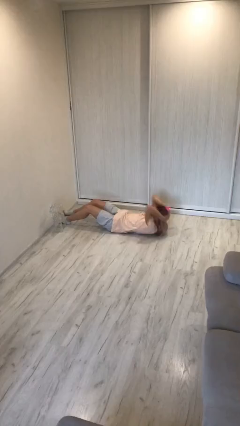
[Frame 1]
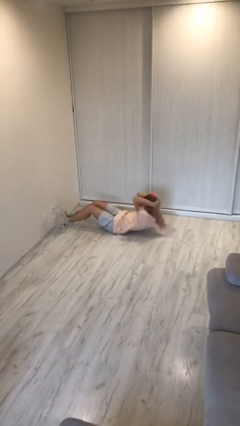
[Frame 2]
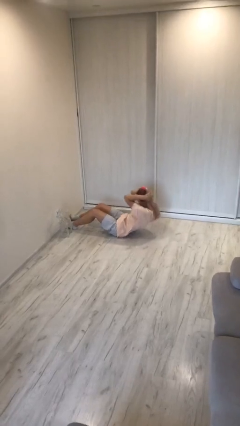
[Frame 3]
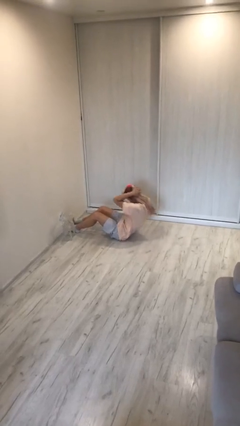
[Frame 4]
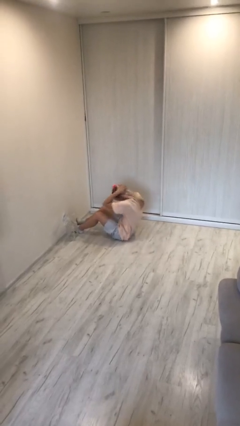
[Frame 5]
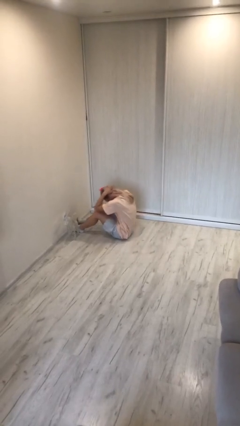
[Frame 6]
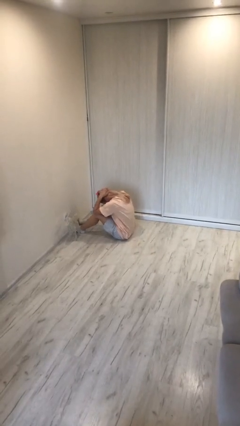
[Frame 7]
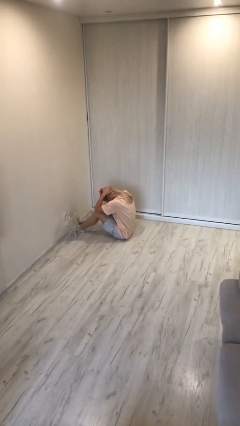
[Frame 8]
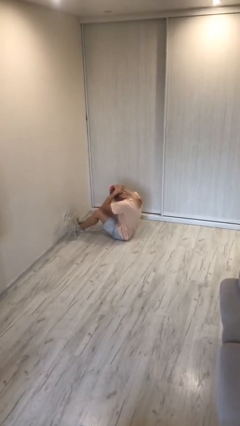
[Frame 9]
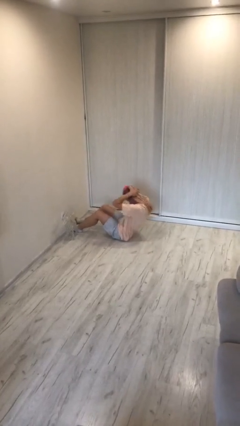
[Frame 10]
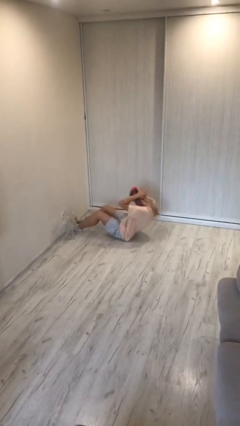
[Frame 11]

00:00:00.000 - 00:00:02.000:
person exercises with situp

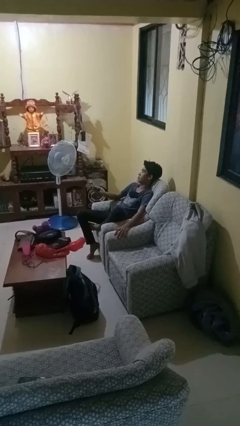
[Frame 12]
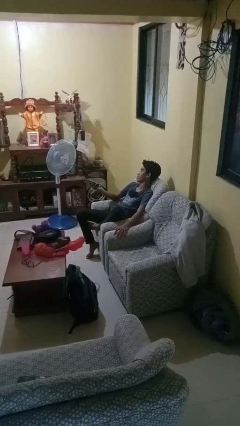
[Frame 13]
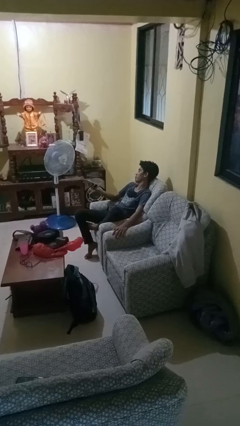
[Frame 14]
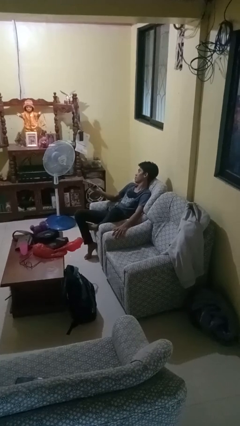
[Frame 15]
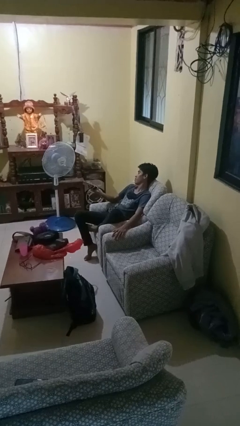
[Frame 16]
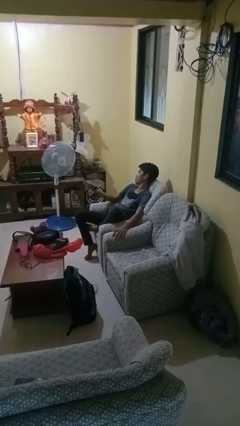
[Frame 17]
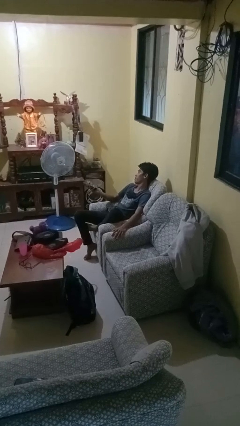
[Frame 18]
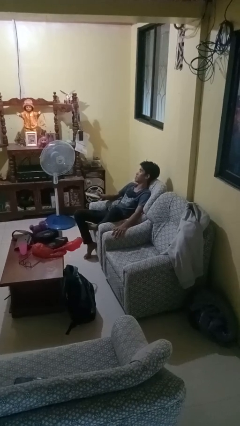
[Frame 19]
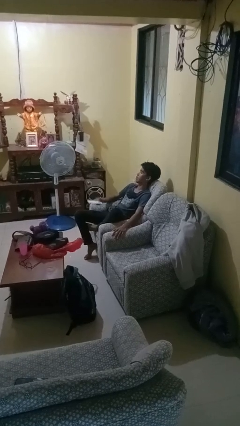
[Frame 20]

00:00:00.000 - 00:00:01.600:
person uses television remote

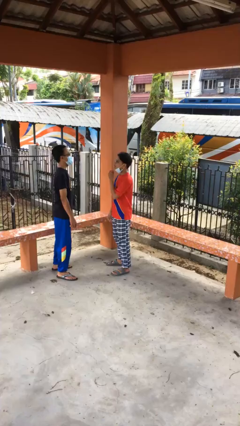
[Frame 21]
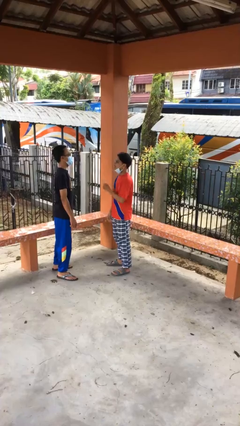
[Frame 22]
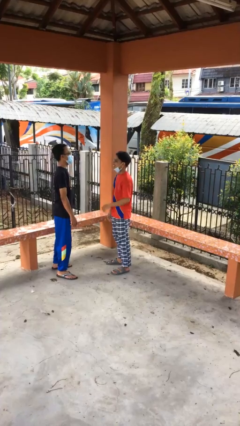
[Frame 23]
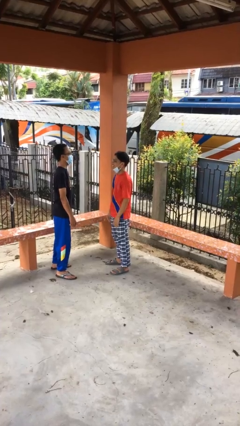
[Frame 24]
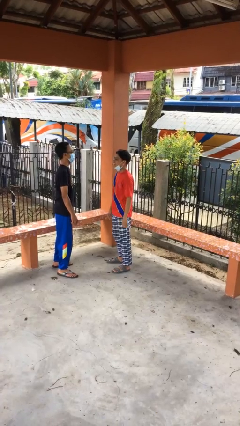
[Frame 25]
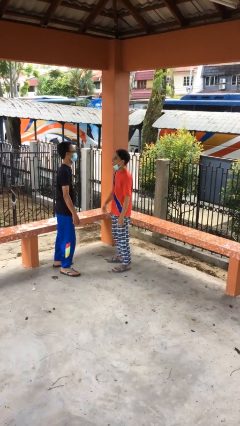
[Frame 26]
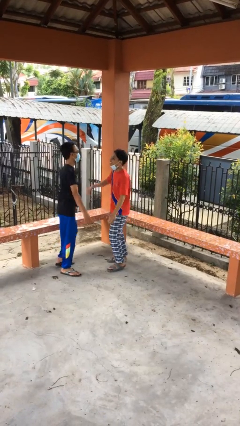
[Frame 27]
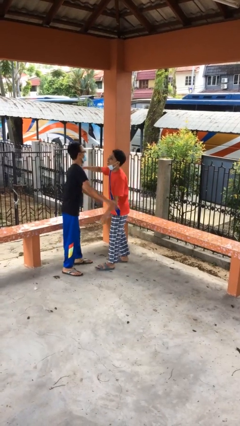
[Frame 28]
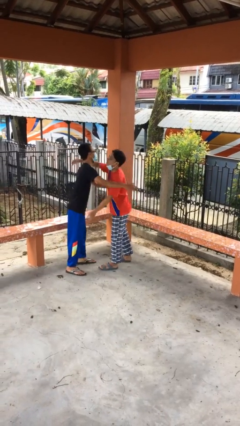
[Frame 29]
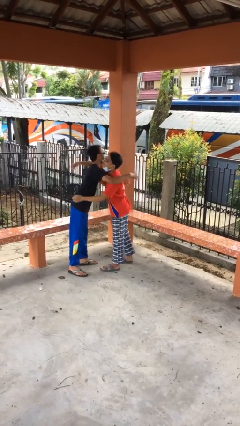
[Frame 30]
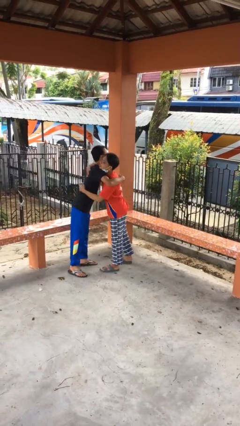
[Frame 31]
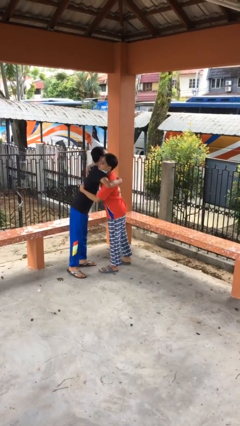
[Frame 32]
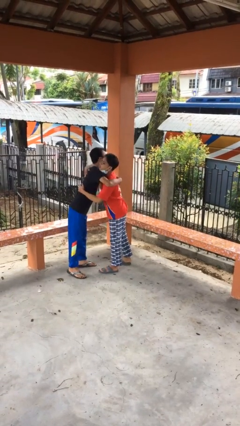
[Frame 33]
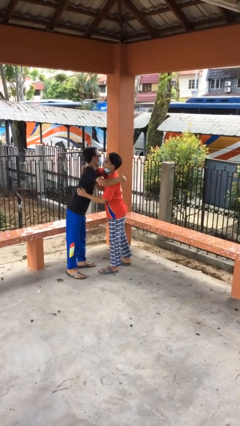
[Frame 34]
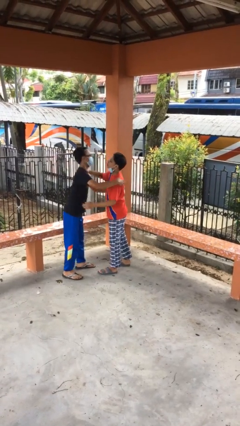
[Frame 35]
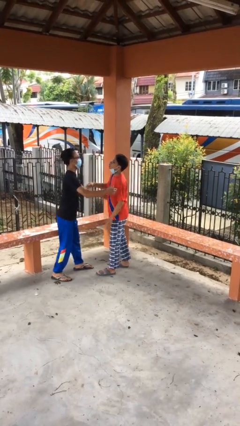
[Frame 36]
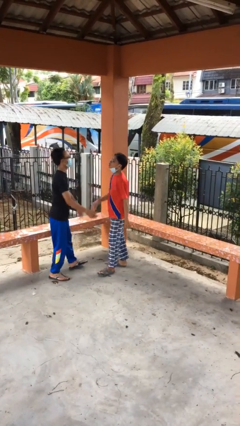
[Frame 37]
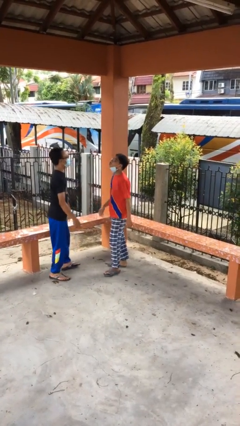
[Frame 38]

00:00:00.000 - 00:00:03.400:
person embraces person

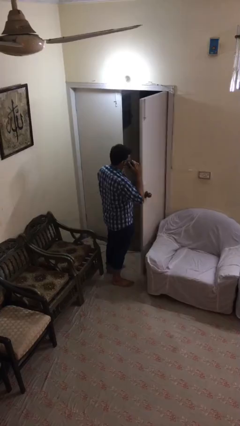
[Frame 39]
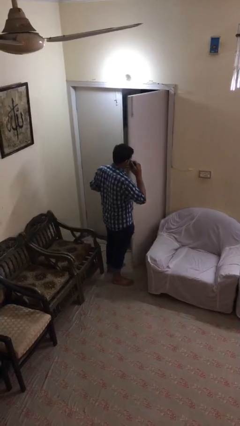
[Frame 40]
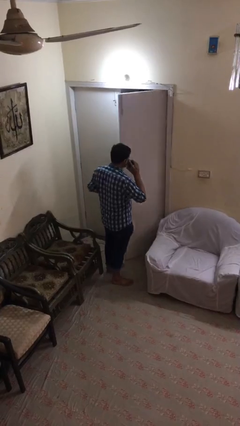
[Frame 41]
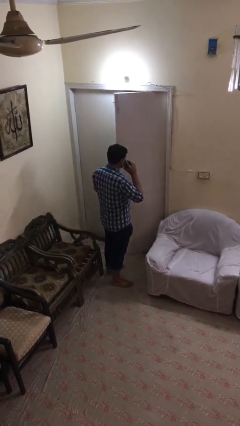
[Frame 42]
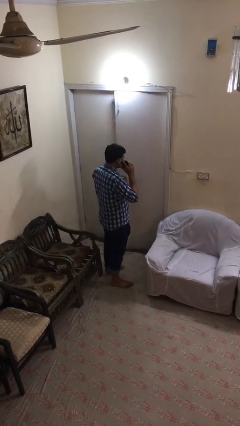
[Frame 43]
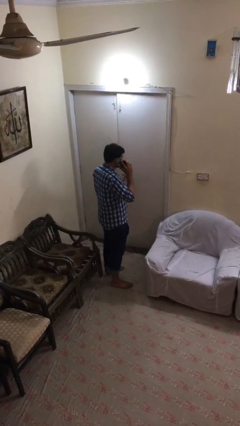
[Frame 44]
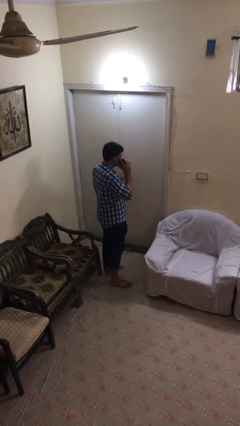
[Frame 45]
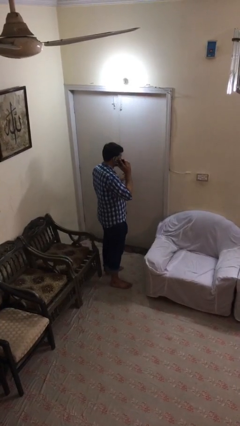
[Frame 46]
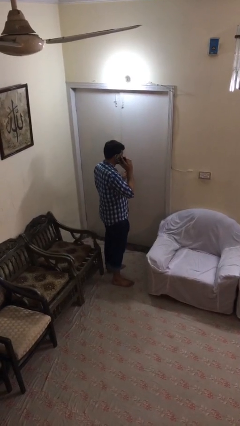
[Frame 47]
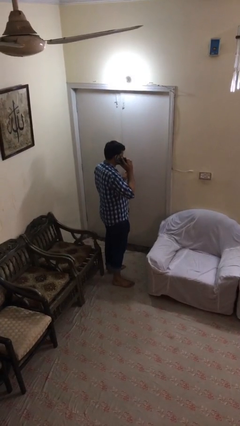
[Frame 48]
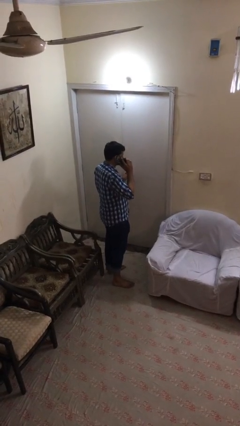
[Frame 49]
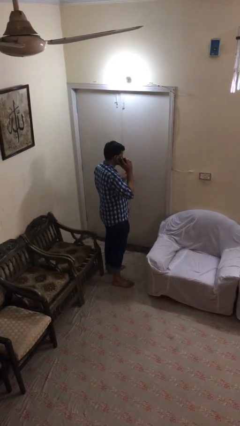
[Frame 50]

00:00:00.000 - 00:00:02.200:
person closes facility door

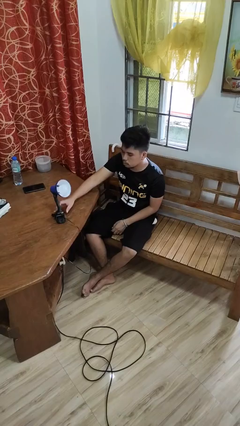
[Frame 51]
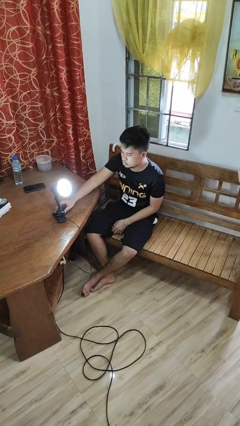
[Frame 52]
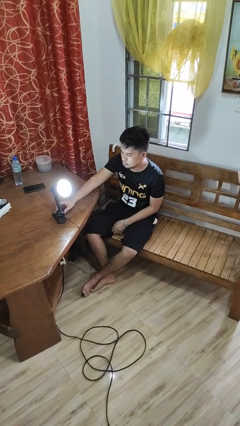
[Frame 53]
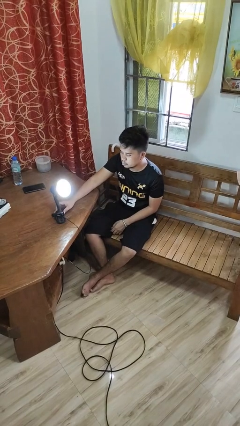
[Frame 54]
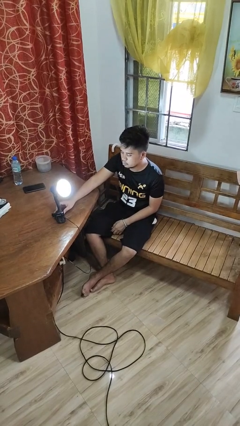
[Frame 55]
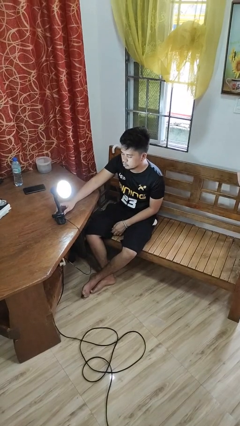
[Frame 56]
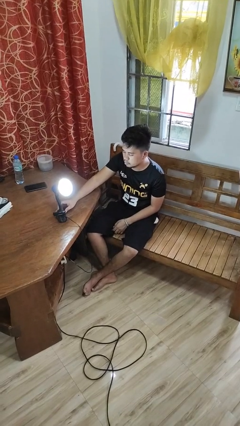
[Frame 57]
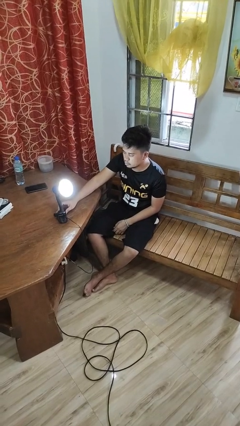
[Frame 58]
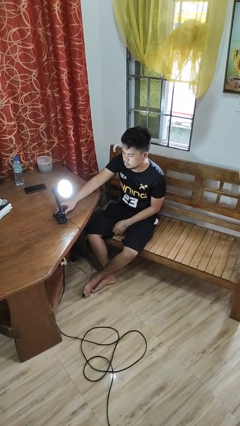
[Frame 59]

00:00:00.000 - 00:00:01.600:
person turns on lamp

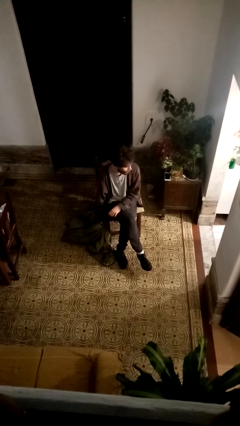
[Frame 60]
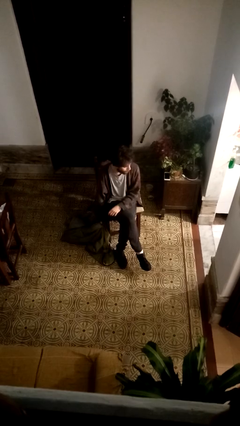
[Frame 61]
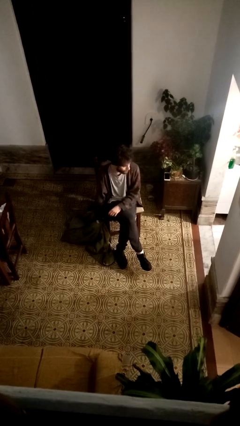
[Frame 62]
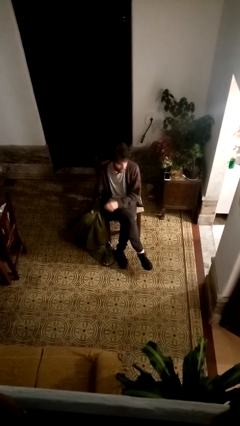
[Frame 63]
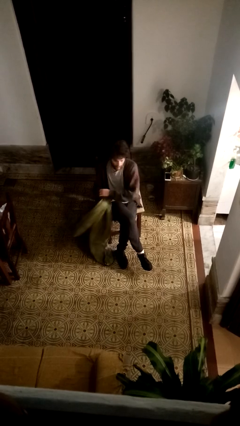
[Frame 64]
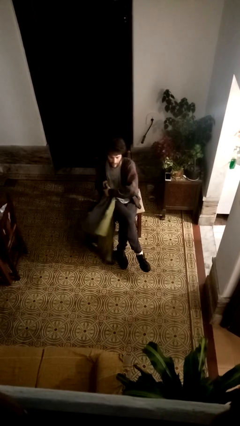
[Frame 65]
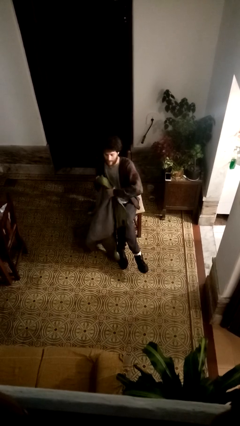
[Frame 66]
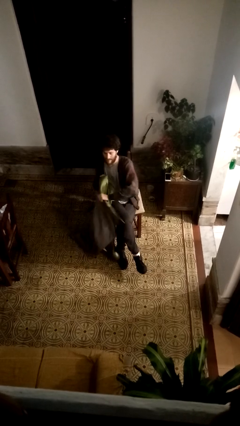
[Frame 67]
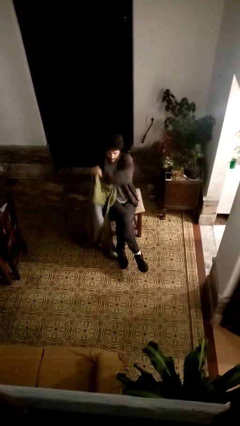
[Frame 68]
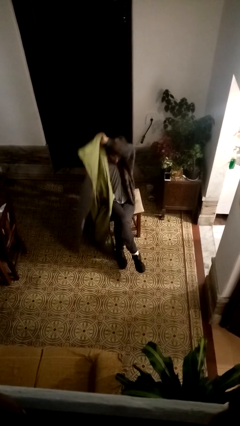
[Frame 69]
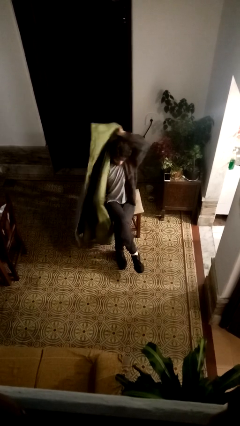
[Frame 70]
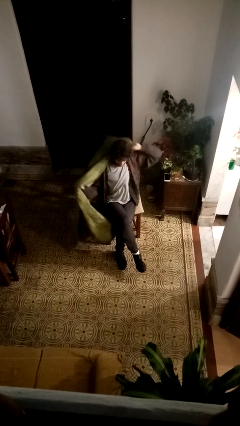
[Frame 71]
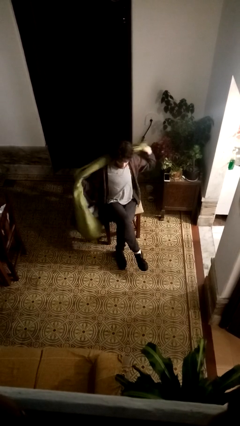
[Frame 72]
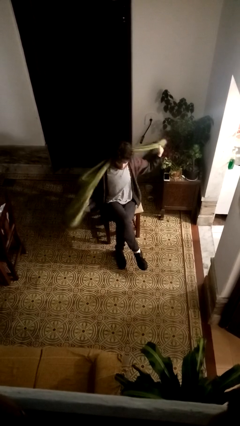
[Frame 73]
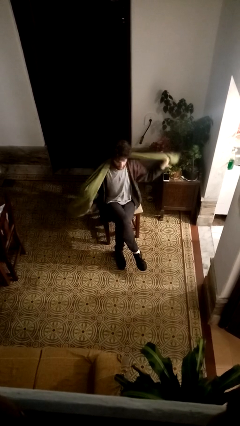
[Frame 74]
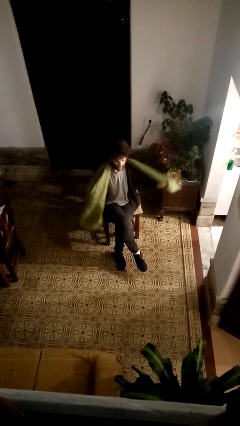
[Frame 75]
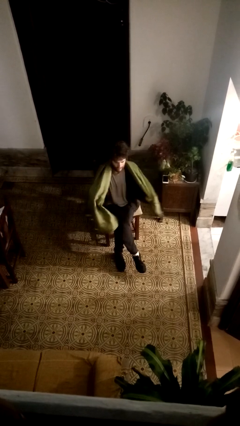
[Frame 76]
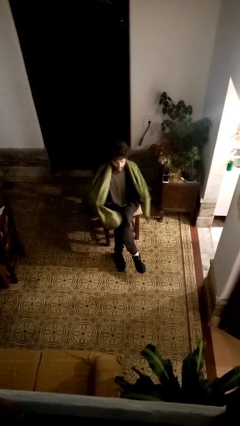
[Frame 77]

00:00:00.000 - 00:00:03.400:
person covers with blanket

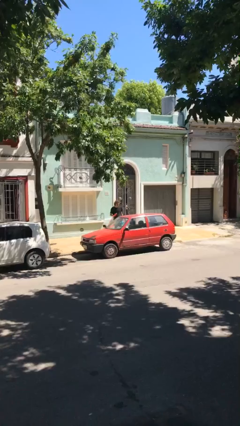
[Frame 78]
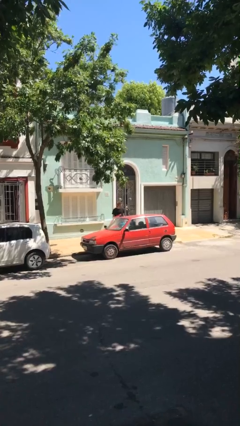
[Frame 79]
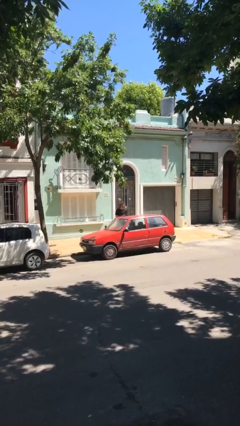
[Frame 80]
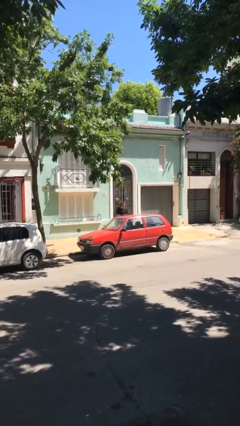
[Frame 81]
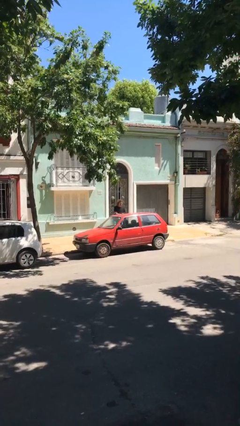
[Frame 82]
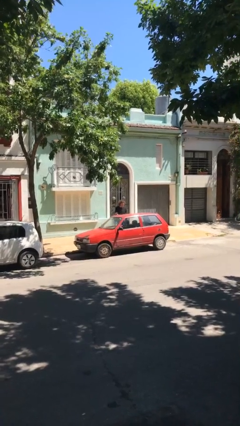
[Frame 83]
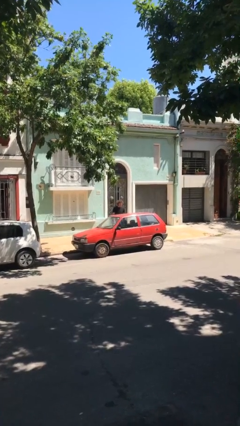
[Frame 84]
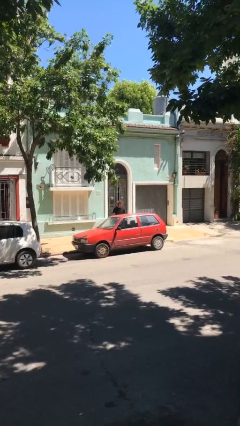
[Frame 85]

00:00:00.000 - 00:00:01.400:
person closes car door

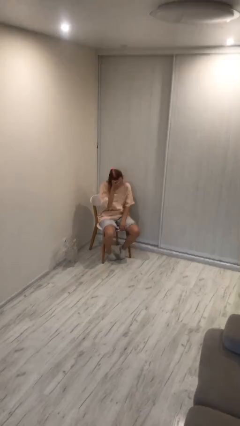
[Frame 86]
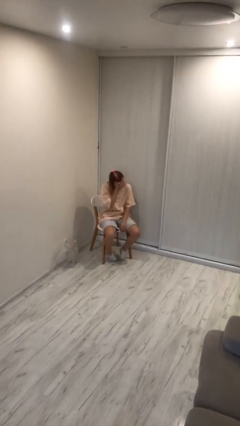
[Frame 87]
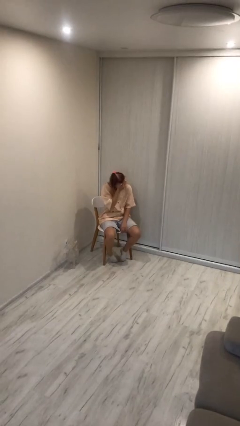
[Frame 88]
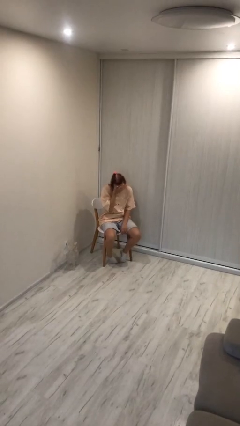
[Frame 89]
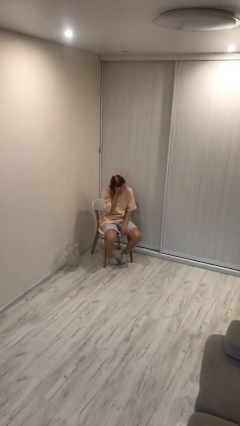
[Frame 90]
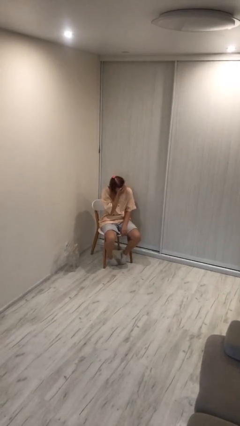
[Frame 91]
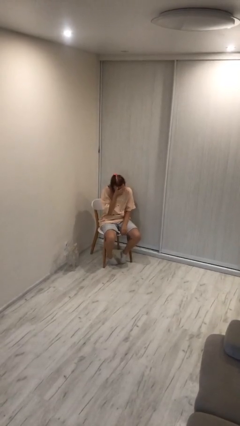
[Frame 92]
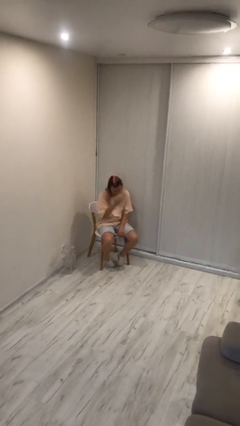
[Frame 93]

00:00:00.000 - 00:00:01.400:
person covers face with hands

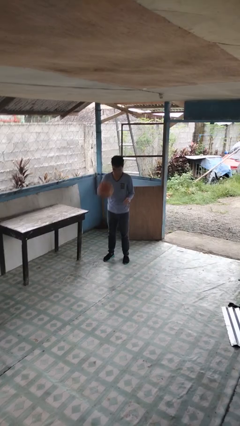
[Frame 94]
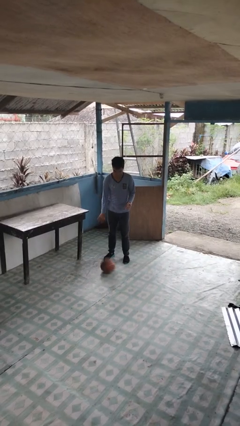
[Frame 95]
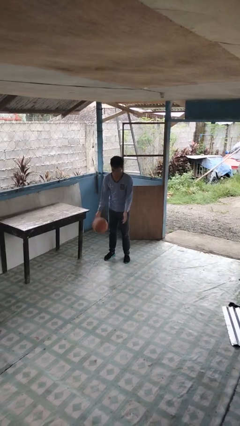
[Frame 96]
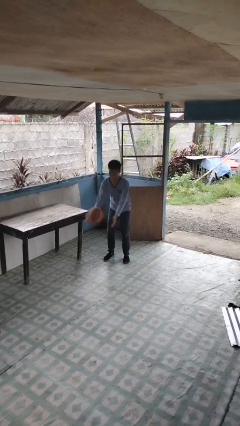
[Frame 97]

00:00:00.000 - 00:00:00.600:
person bounces ball on floor
